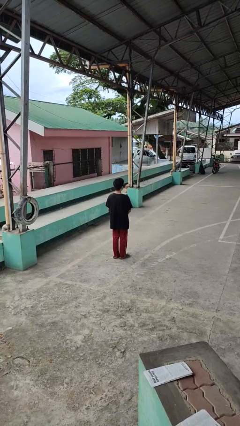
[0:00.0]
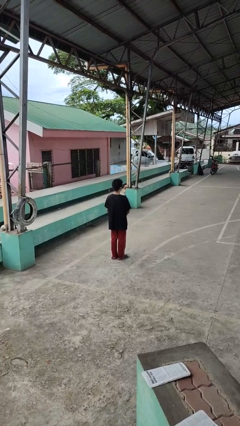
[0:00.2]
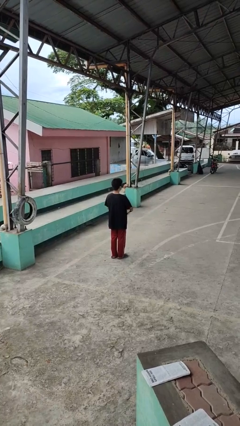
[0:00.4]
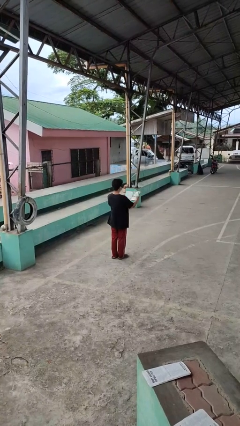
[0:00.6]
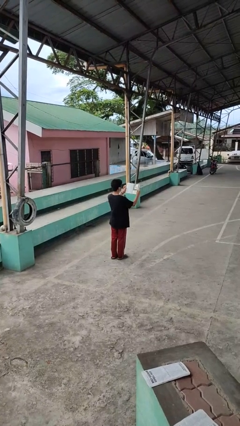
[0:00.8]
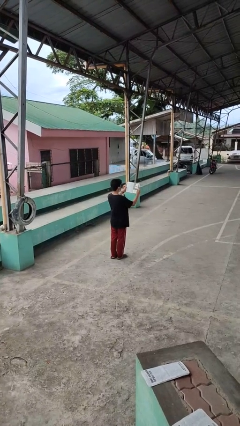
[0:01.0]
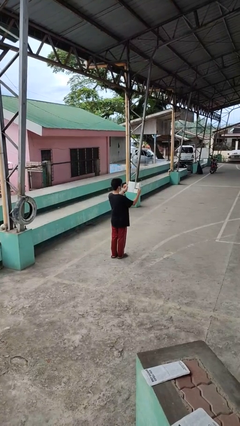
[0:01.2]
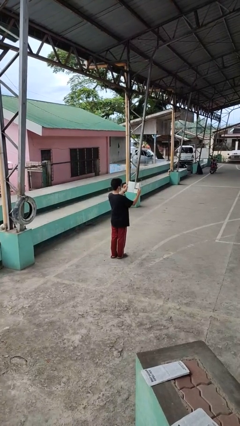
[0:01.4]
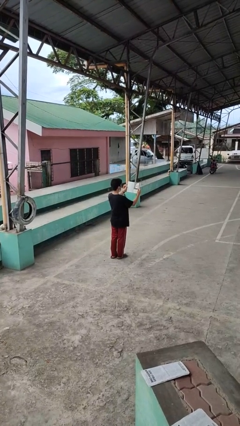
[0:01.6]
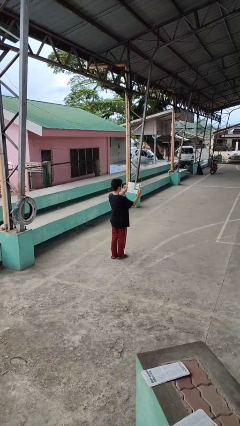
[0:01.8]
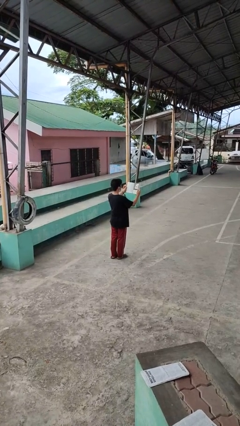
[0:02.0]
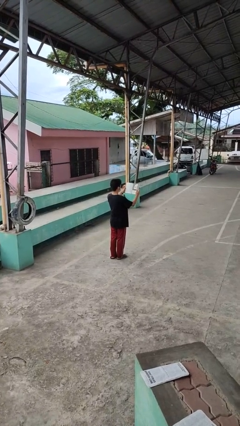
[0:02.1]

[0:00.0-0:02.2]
person reads book

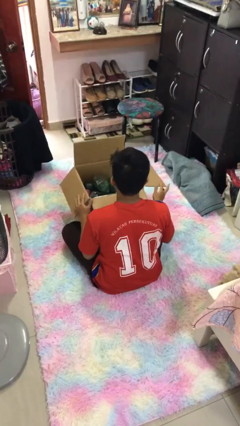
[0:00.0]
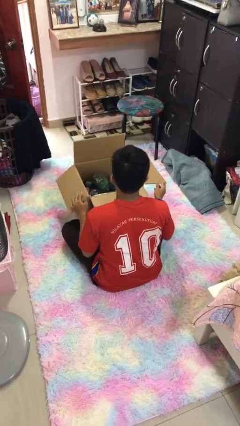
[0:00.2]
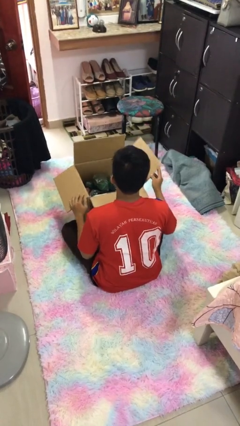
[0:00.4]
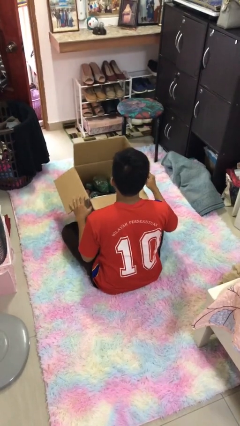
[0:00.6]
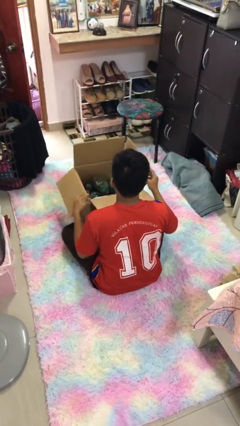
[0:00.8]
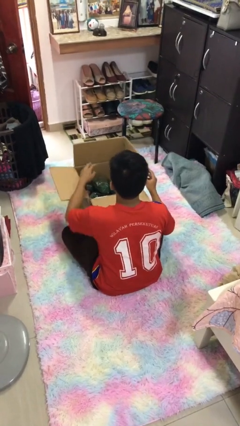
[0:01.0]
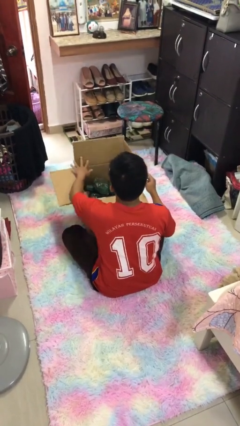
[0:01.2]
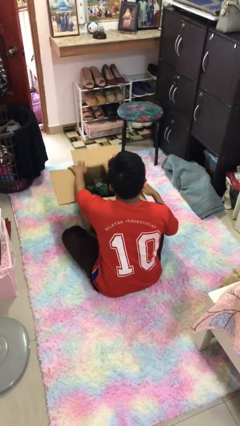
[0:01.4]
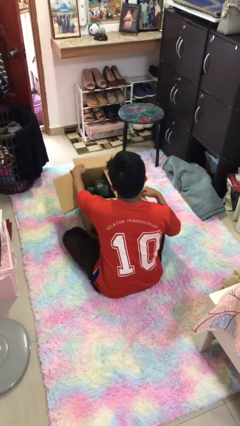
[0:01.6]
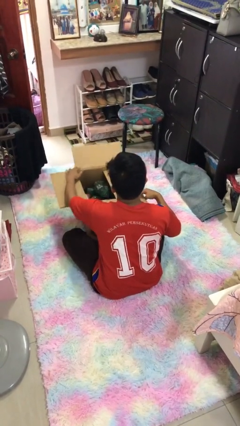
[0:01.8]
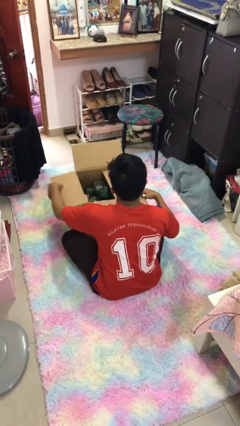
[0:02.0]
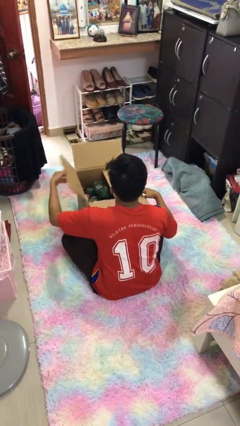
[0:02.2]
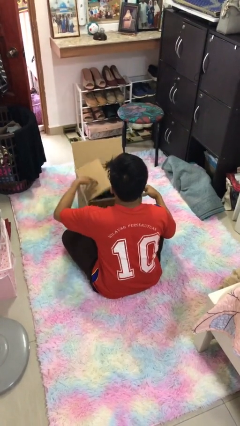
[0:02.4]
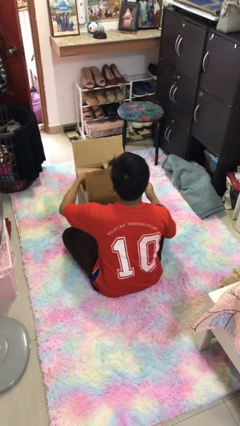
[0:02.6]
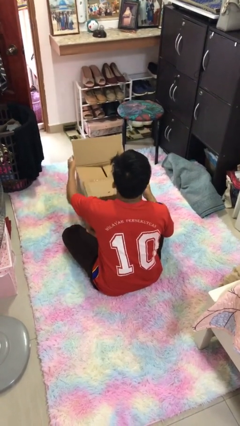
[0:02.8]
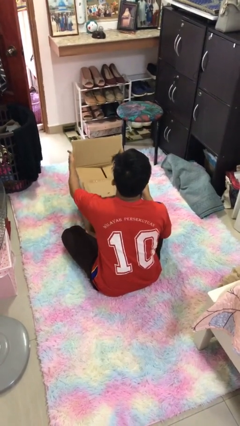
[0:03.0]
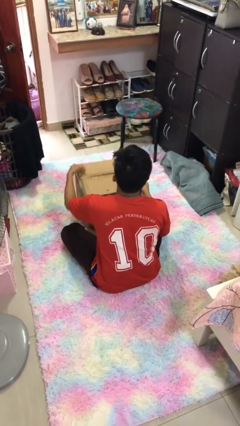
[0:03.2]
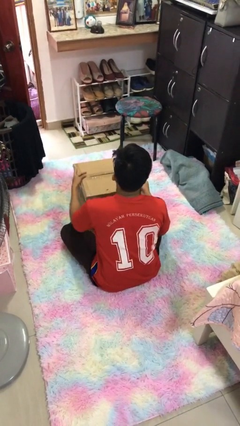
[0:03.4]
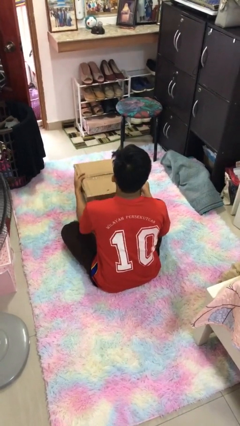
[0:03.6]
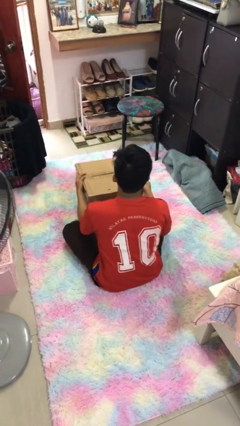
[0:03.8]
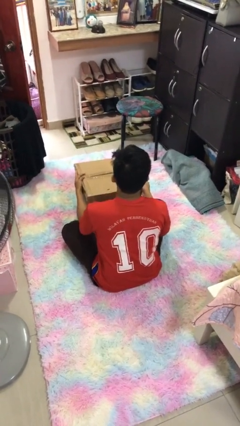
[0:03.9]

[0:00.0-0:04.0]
person closes box

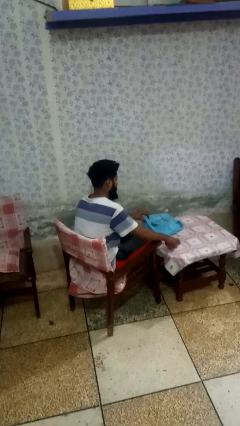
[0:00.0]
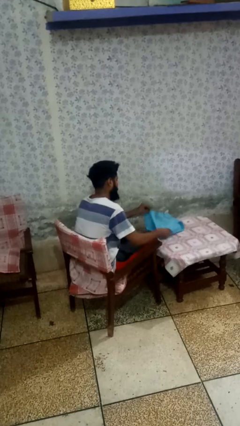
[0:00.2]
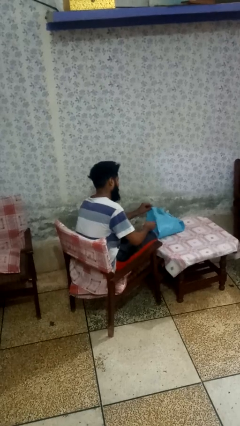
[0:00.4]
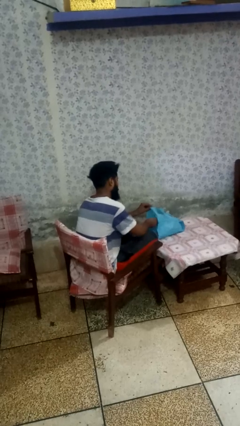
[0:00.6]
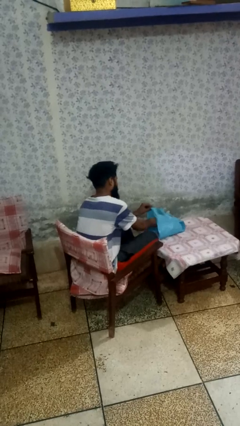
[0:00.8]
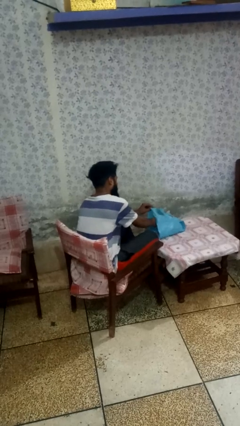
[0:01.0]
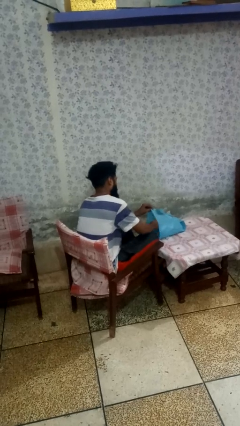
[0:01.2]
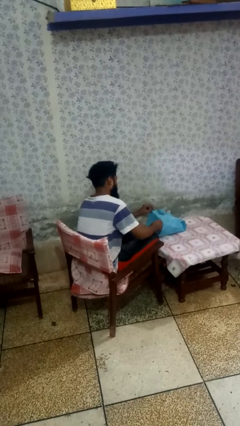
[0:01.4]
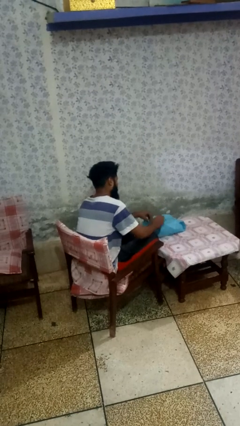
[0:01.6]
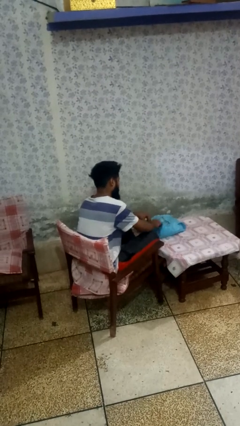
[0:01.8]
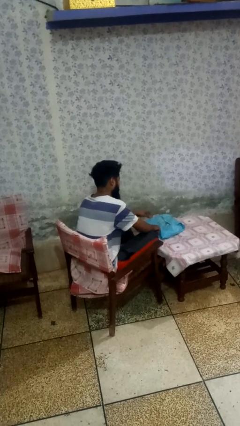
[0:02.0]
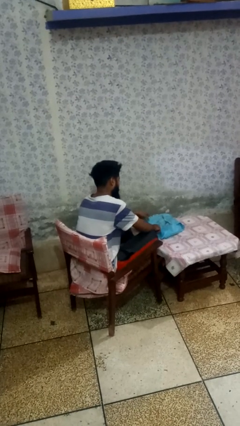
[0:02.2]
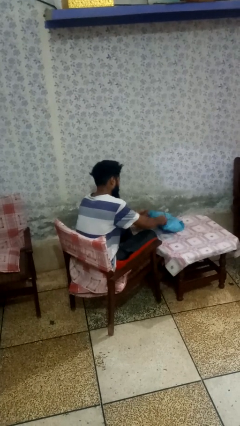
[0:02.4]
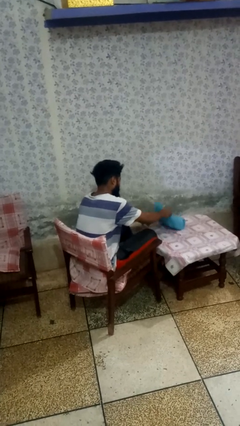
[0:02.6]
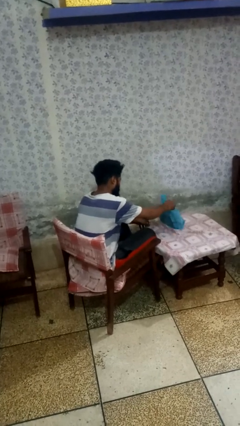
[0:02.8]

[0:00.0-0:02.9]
person puts object into bag

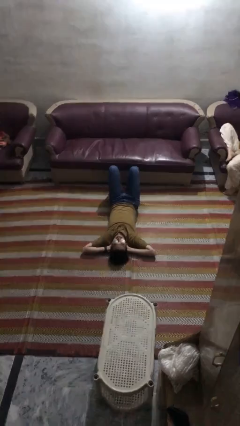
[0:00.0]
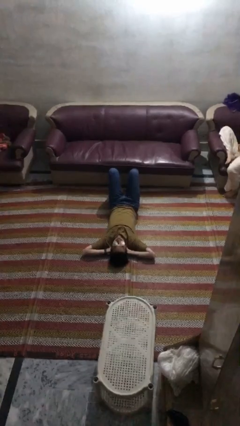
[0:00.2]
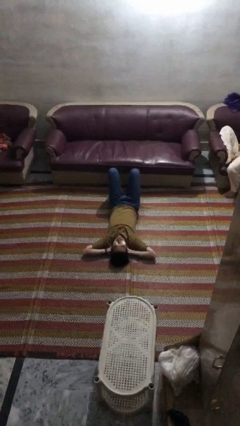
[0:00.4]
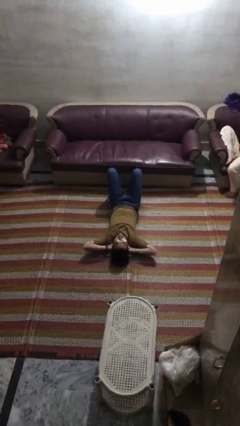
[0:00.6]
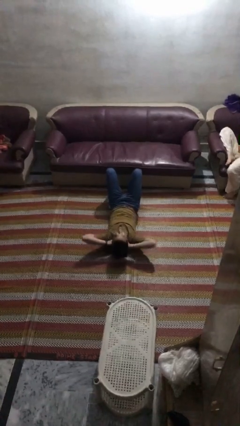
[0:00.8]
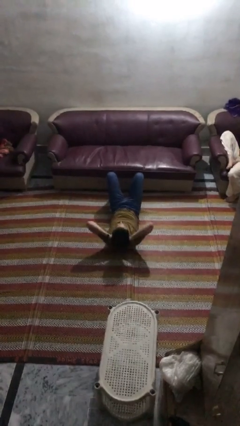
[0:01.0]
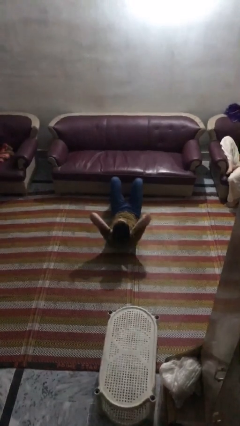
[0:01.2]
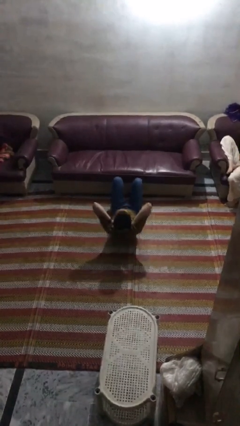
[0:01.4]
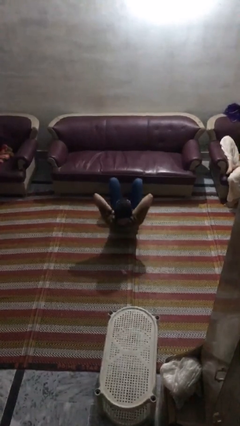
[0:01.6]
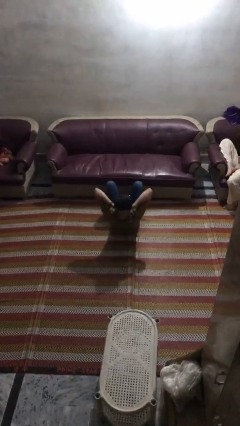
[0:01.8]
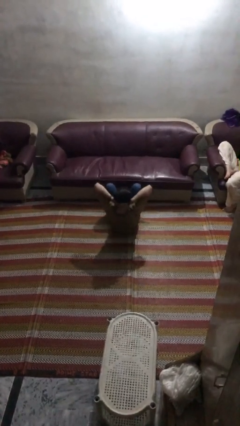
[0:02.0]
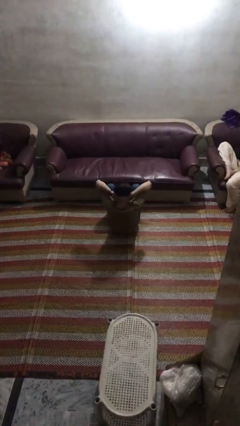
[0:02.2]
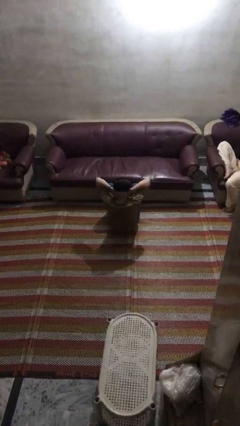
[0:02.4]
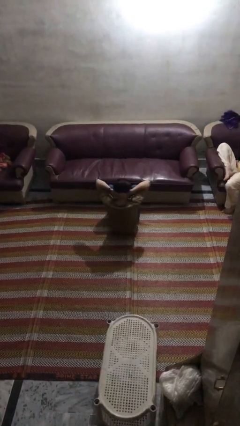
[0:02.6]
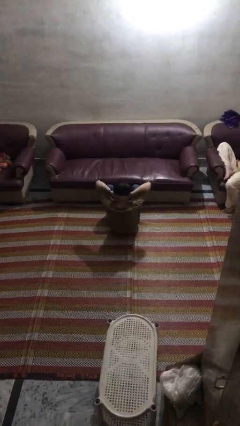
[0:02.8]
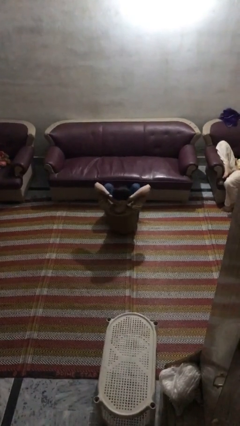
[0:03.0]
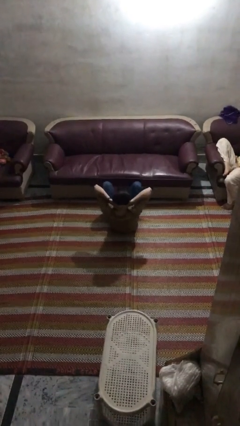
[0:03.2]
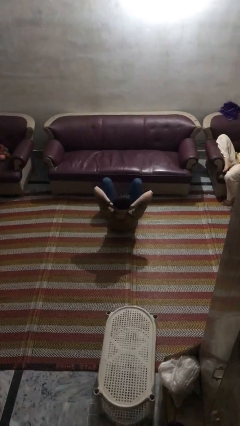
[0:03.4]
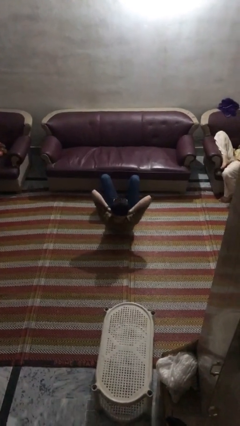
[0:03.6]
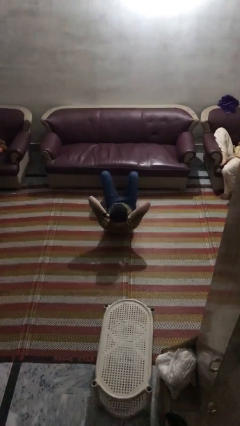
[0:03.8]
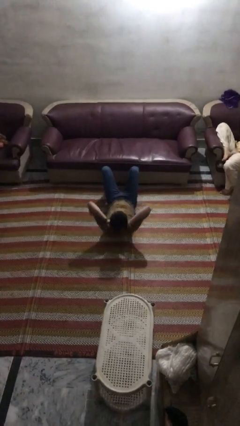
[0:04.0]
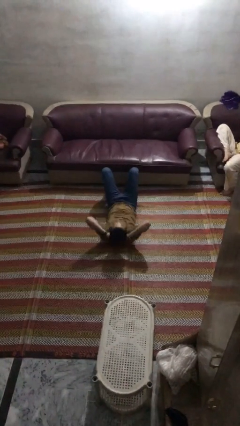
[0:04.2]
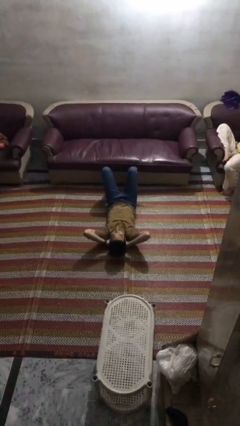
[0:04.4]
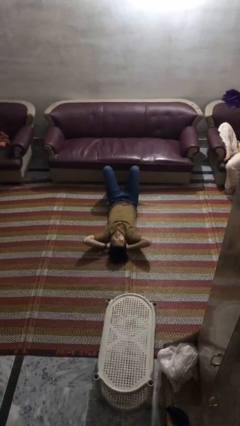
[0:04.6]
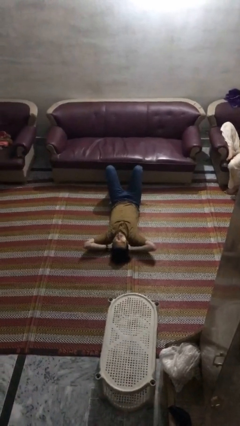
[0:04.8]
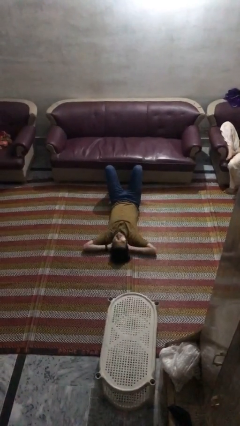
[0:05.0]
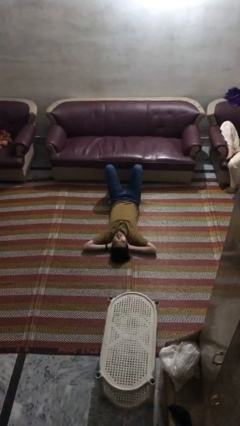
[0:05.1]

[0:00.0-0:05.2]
person exercises with situp

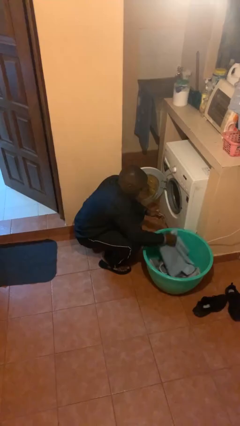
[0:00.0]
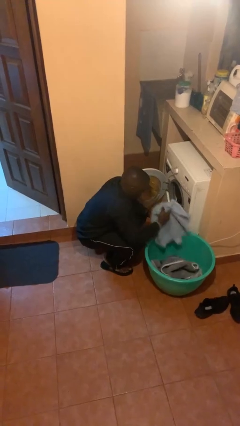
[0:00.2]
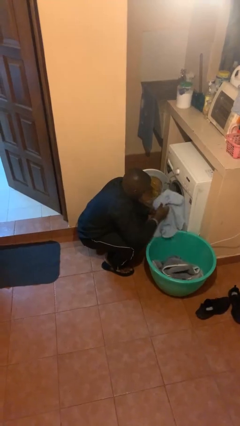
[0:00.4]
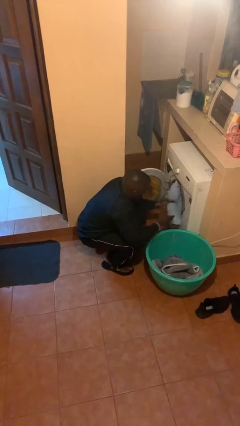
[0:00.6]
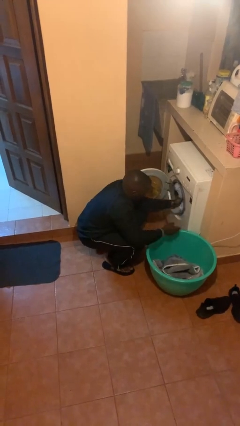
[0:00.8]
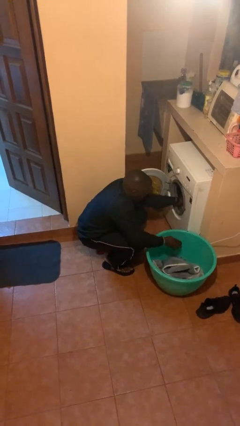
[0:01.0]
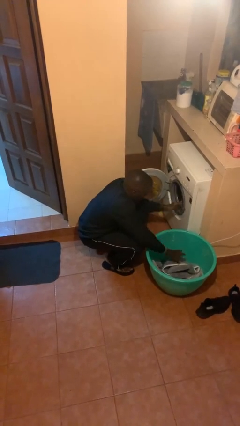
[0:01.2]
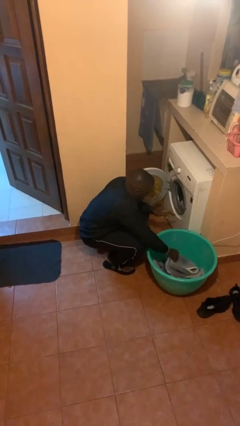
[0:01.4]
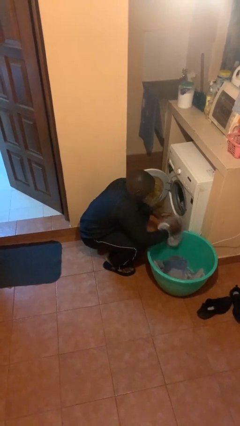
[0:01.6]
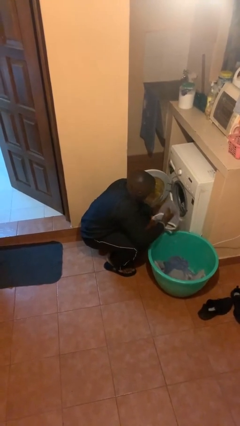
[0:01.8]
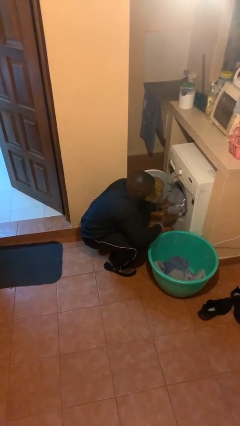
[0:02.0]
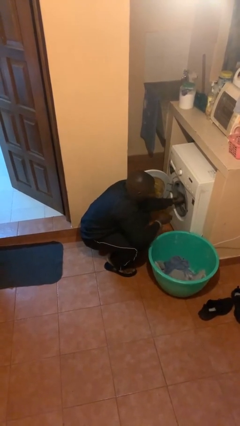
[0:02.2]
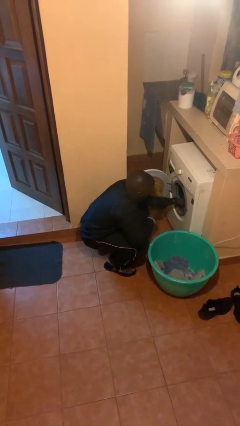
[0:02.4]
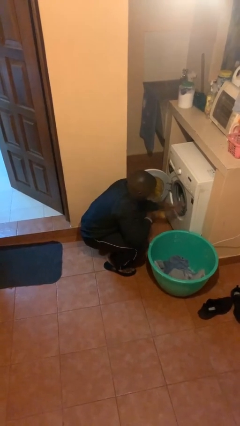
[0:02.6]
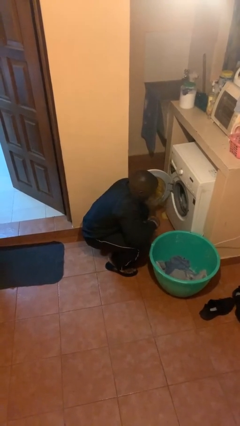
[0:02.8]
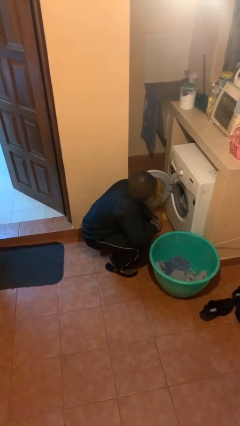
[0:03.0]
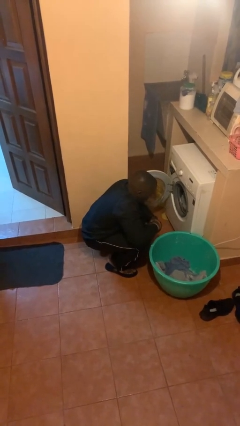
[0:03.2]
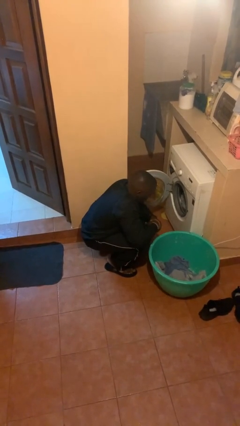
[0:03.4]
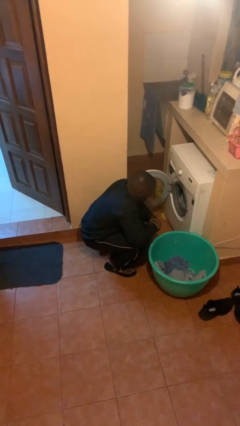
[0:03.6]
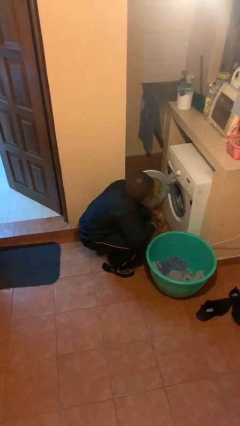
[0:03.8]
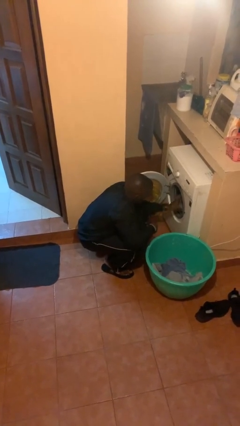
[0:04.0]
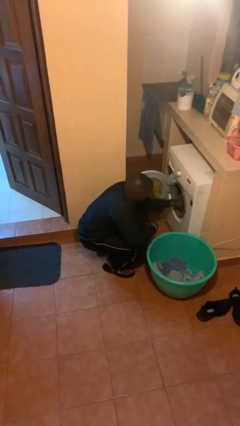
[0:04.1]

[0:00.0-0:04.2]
person loads clotheswasher
